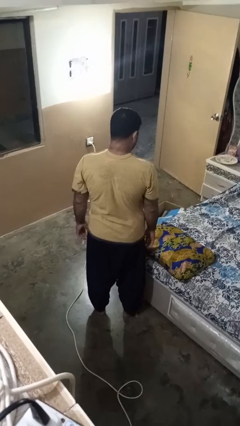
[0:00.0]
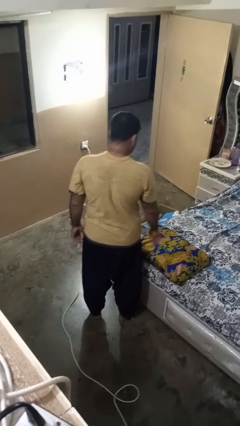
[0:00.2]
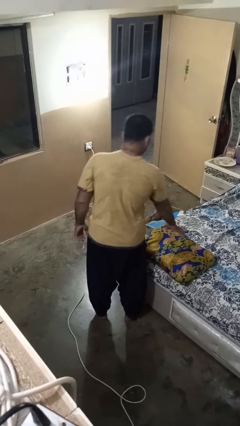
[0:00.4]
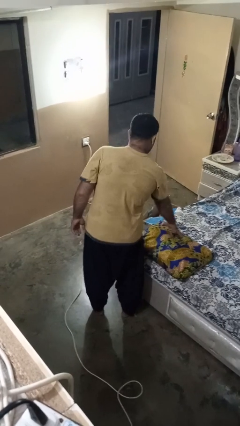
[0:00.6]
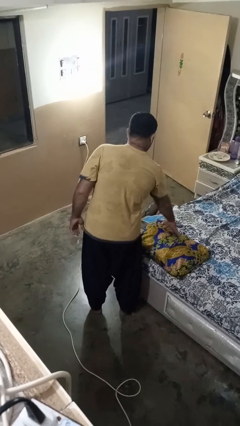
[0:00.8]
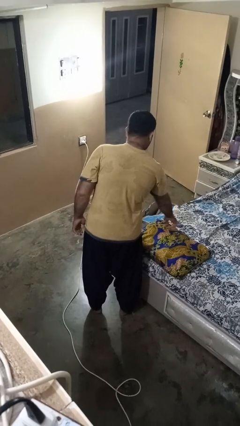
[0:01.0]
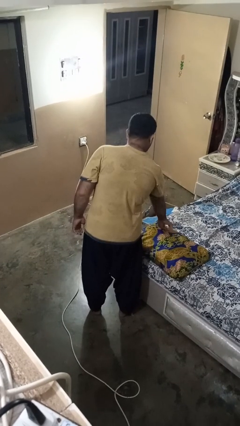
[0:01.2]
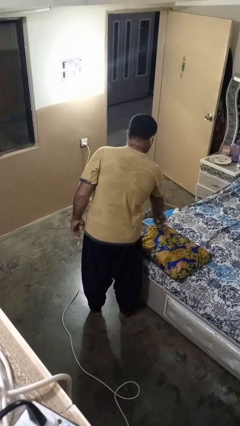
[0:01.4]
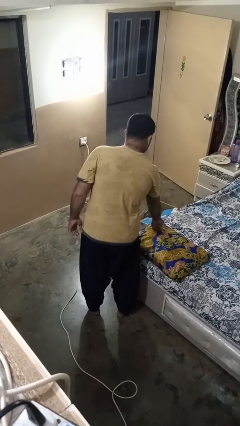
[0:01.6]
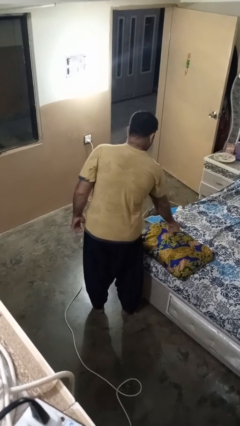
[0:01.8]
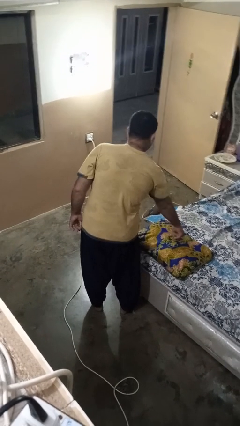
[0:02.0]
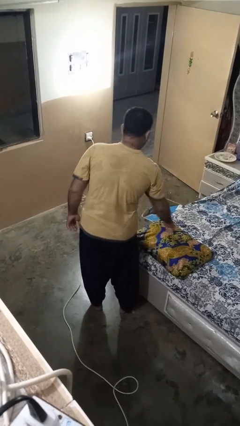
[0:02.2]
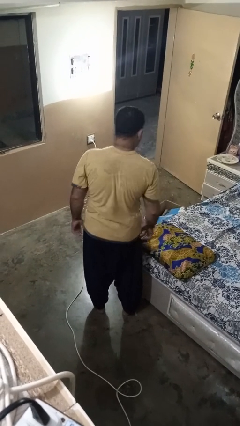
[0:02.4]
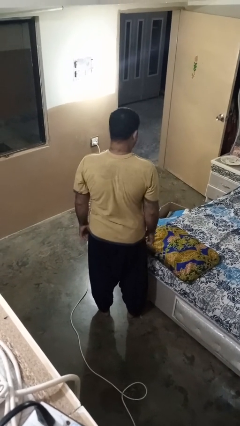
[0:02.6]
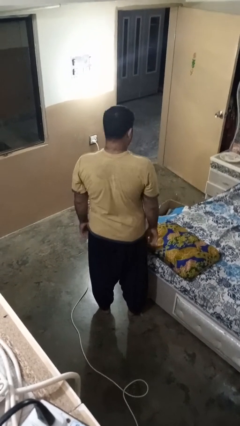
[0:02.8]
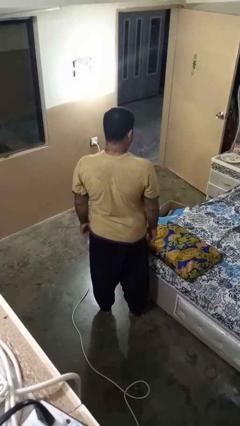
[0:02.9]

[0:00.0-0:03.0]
person taps object with finger

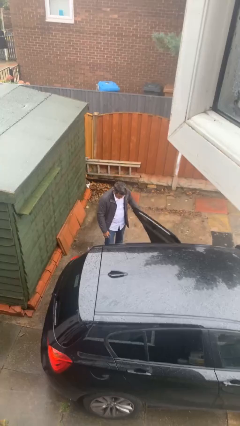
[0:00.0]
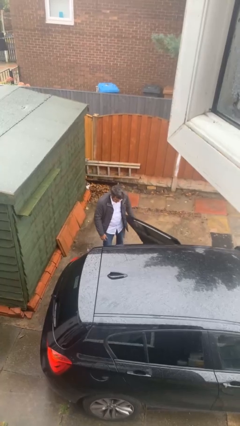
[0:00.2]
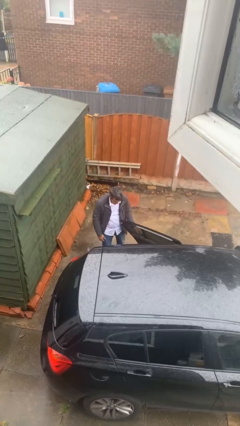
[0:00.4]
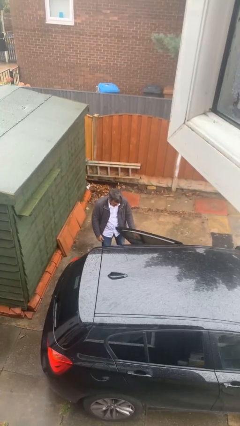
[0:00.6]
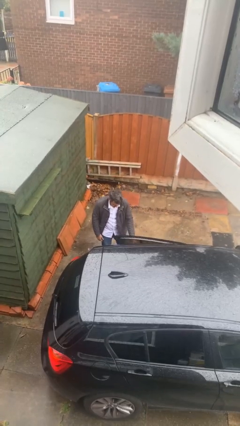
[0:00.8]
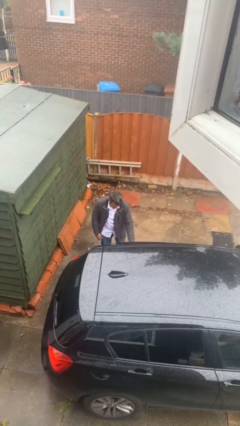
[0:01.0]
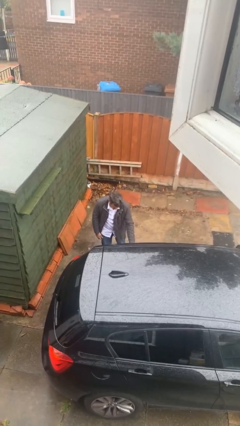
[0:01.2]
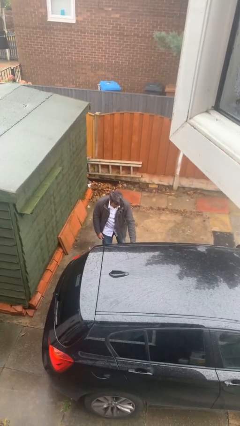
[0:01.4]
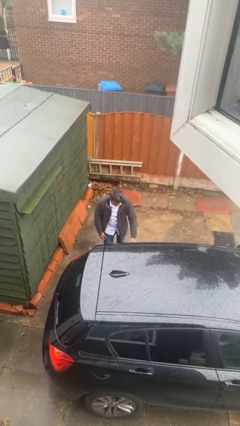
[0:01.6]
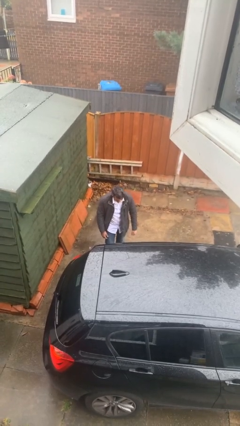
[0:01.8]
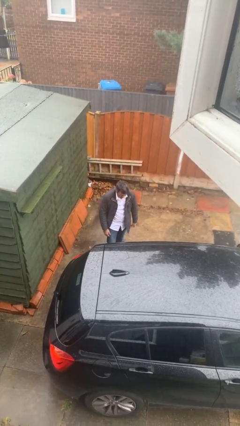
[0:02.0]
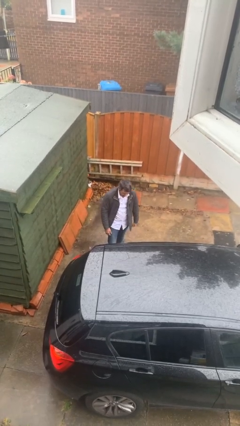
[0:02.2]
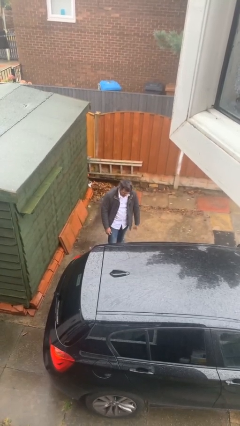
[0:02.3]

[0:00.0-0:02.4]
person closes car door

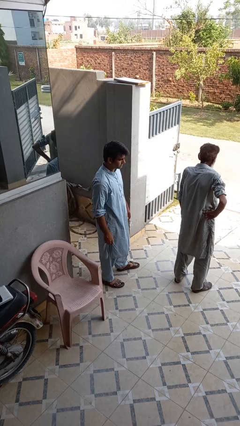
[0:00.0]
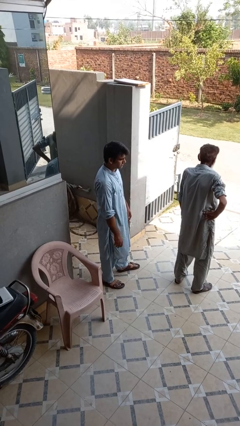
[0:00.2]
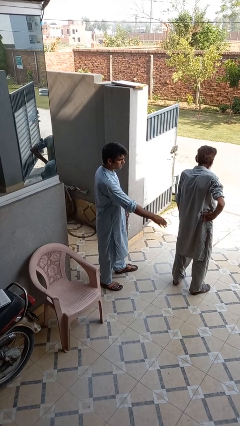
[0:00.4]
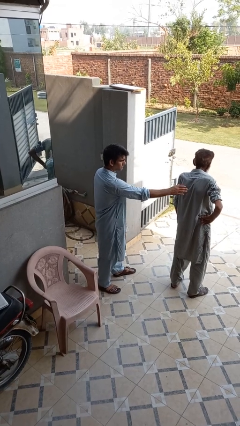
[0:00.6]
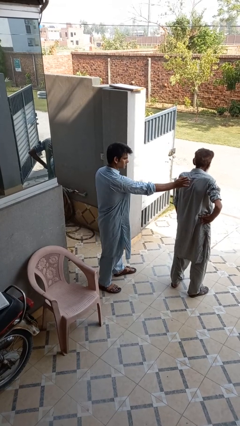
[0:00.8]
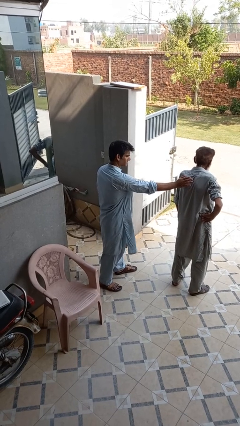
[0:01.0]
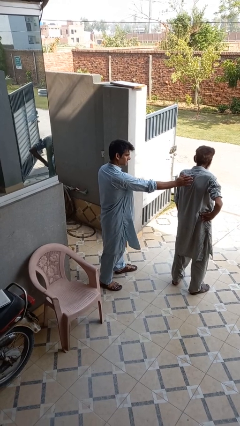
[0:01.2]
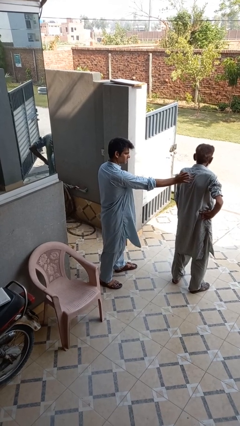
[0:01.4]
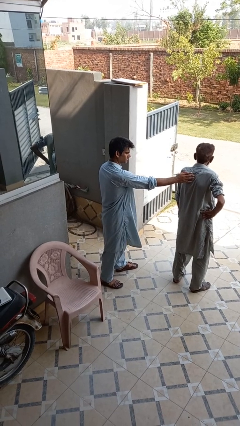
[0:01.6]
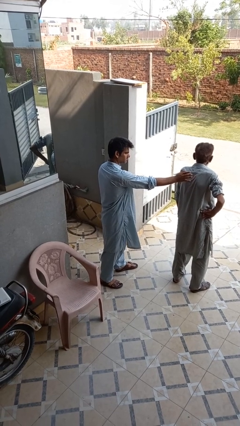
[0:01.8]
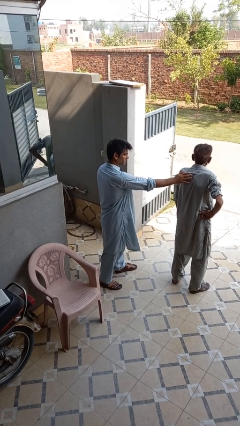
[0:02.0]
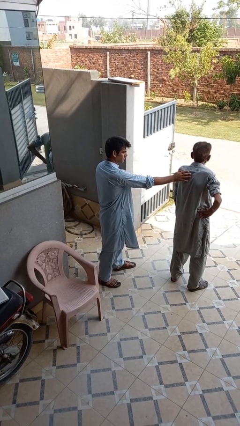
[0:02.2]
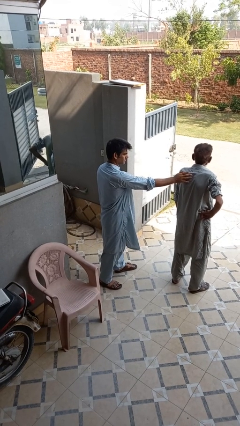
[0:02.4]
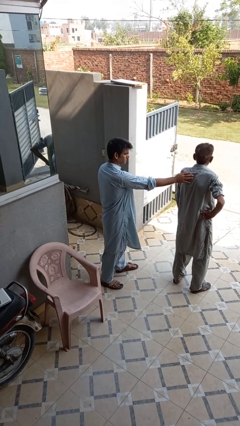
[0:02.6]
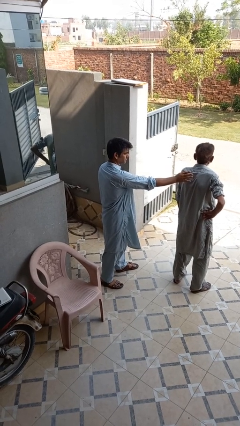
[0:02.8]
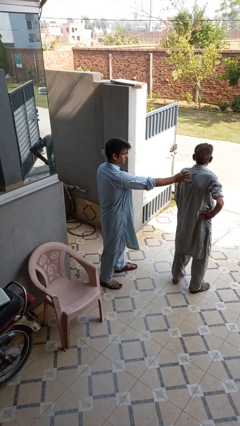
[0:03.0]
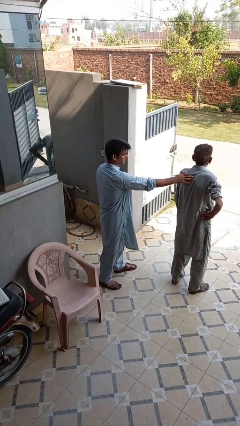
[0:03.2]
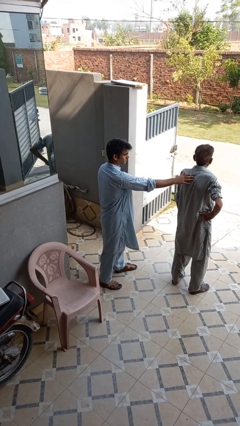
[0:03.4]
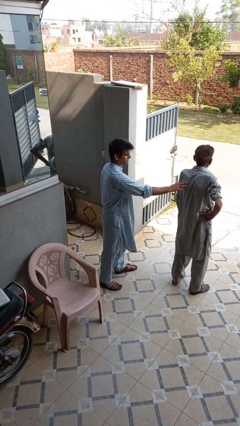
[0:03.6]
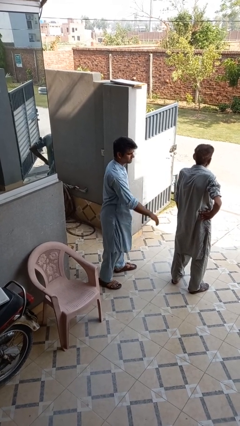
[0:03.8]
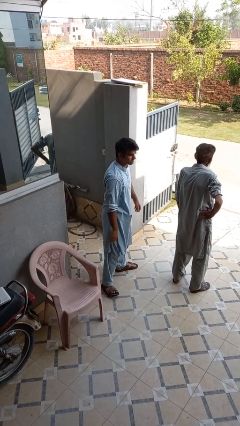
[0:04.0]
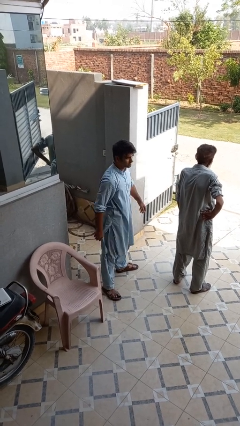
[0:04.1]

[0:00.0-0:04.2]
person touches back of person

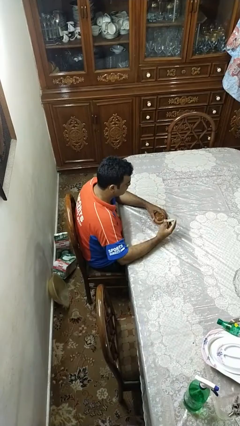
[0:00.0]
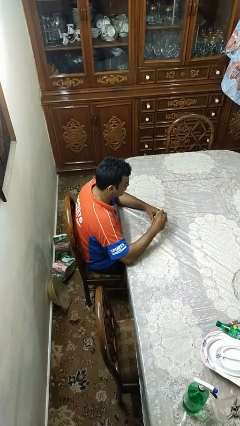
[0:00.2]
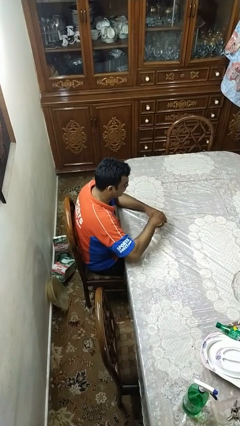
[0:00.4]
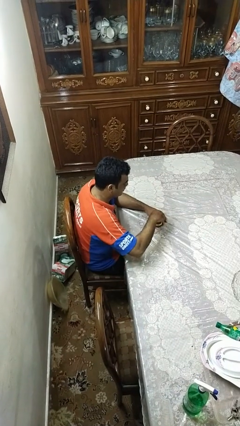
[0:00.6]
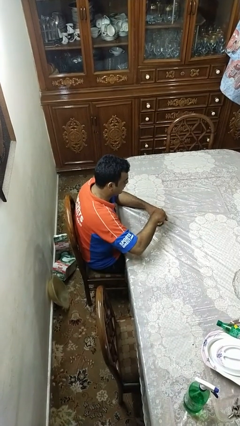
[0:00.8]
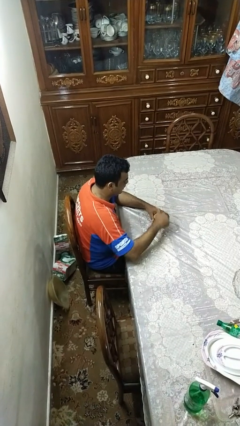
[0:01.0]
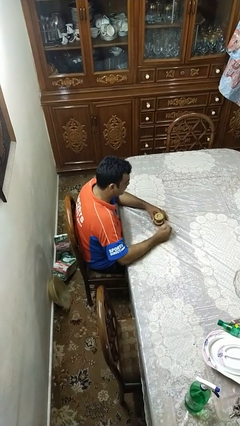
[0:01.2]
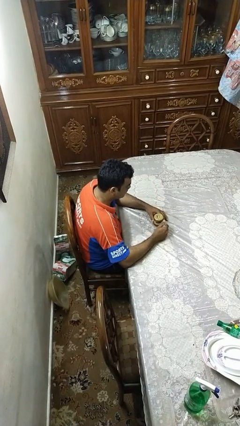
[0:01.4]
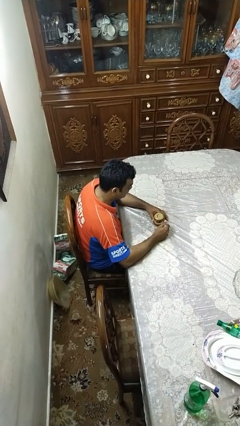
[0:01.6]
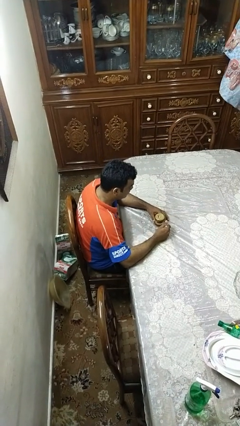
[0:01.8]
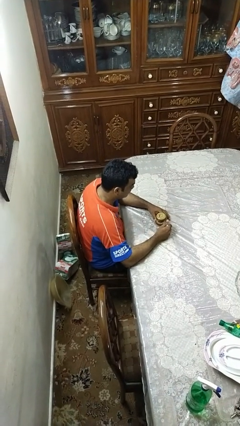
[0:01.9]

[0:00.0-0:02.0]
person closes jar

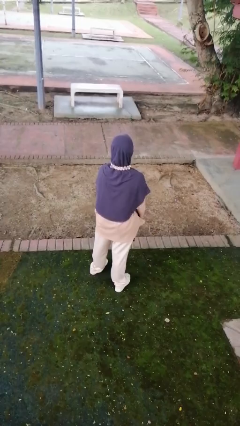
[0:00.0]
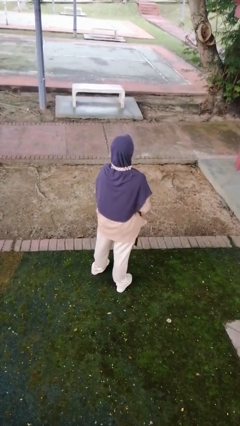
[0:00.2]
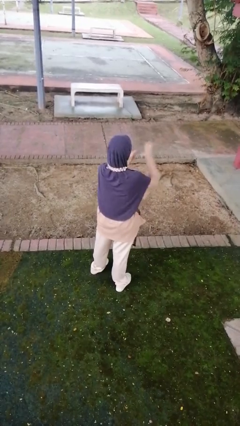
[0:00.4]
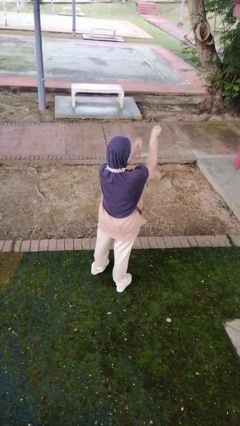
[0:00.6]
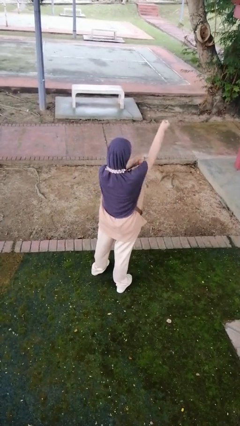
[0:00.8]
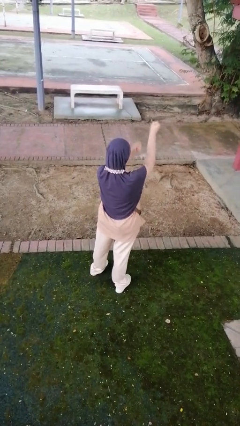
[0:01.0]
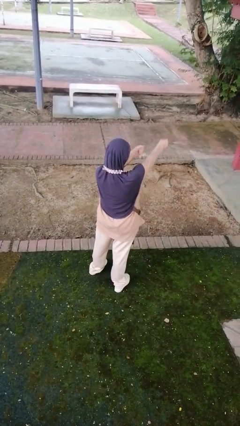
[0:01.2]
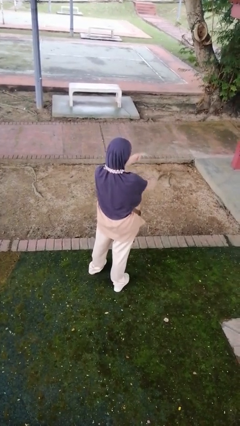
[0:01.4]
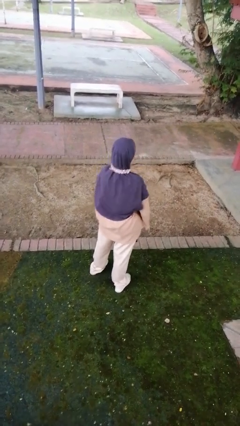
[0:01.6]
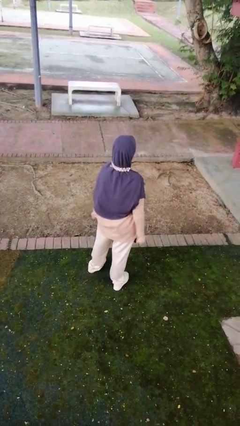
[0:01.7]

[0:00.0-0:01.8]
person punches

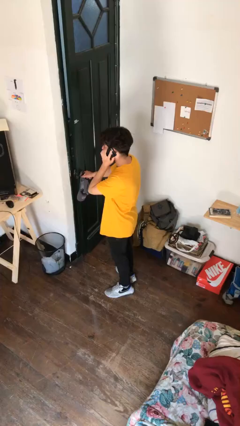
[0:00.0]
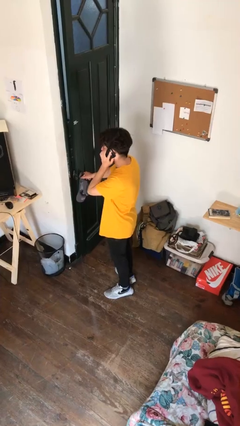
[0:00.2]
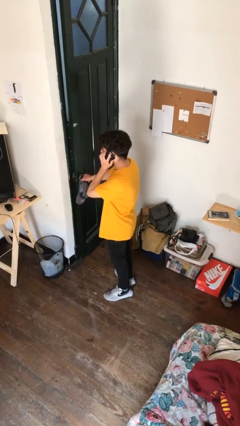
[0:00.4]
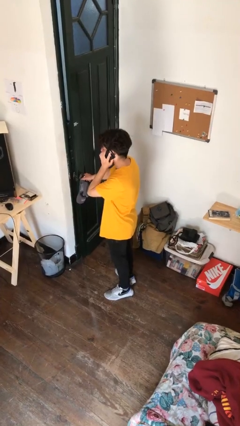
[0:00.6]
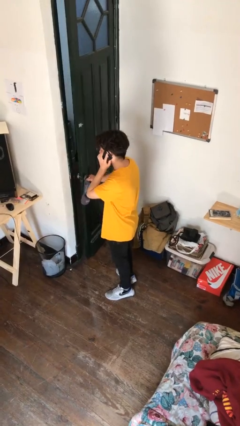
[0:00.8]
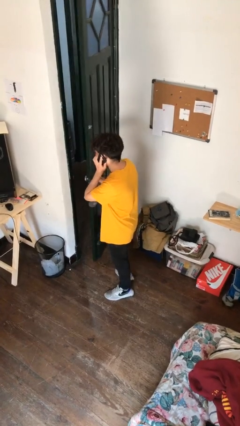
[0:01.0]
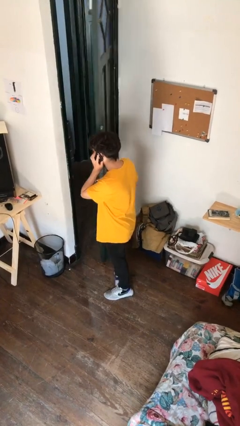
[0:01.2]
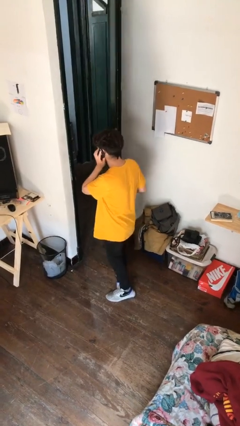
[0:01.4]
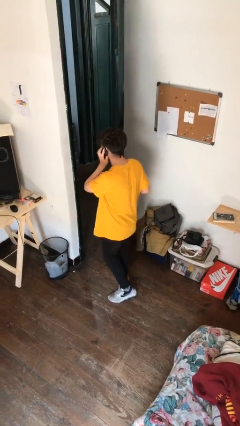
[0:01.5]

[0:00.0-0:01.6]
person opens facility door

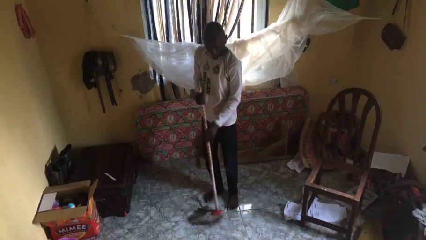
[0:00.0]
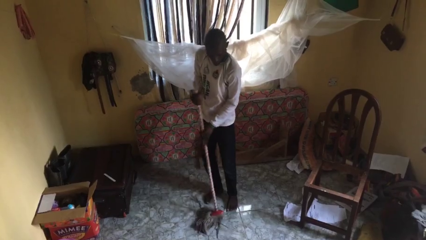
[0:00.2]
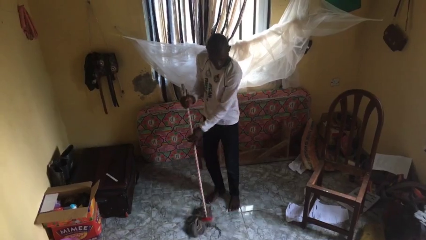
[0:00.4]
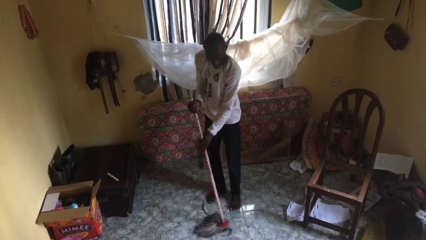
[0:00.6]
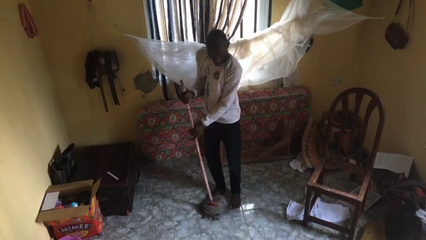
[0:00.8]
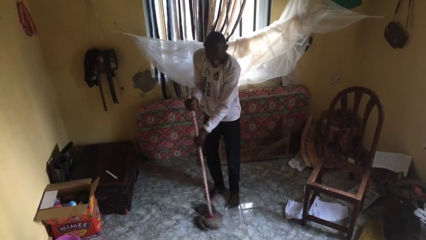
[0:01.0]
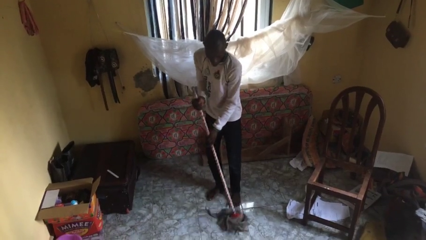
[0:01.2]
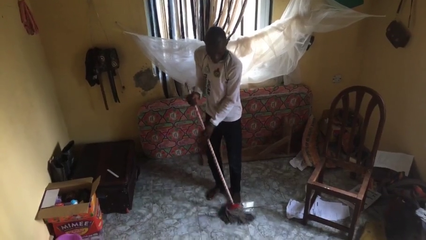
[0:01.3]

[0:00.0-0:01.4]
person mops

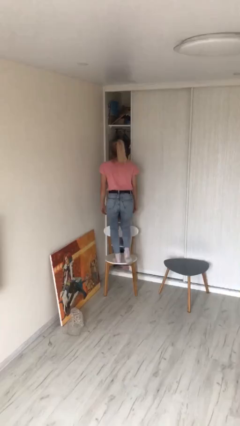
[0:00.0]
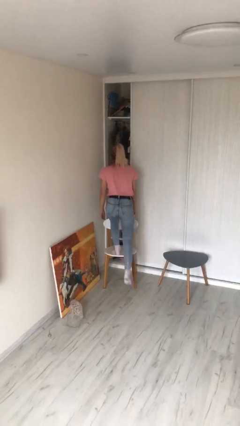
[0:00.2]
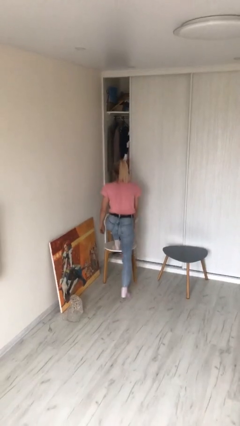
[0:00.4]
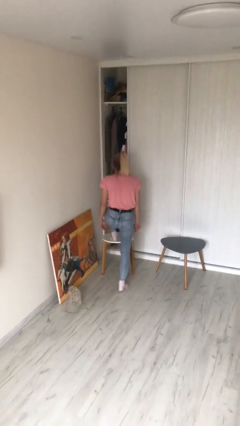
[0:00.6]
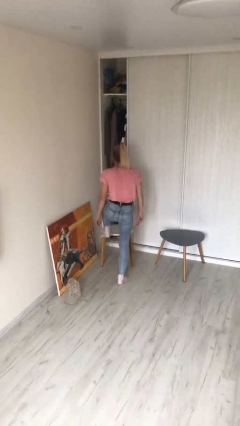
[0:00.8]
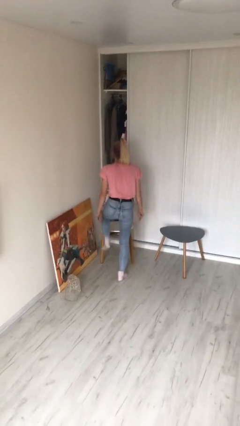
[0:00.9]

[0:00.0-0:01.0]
person climbs off chair
